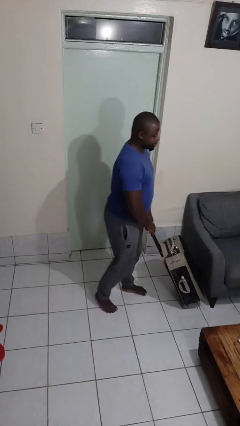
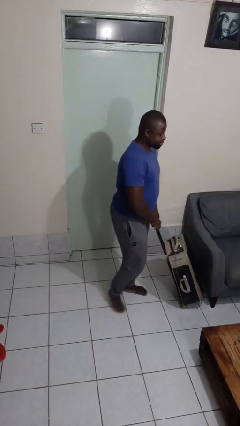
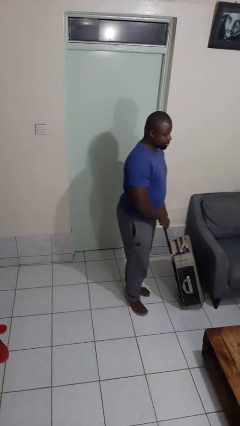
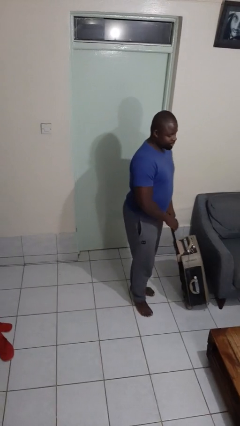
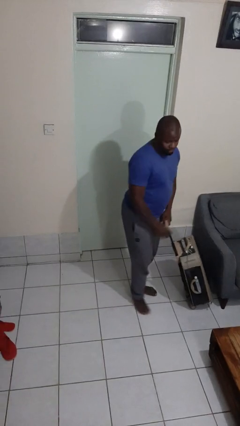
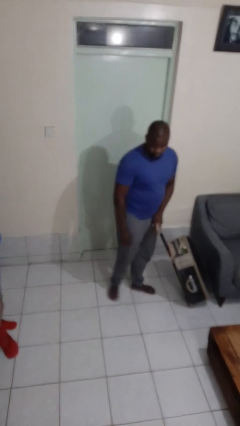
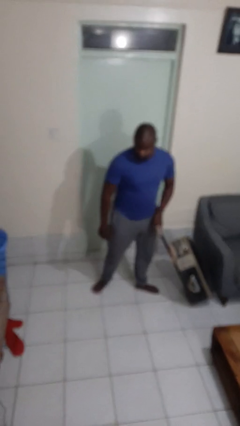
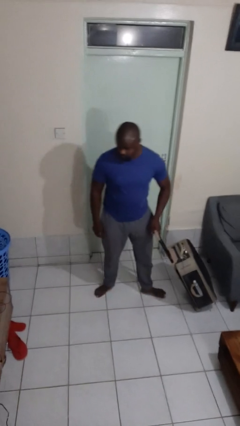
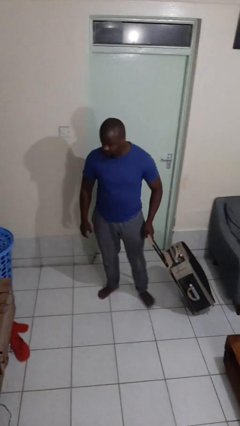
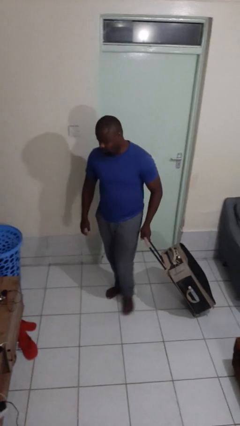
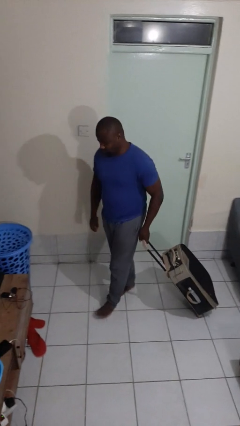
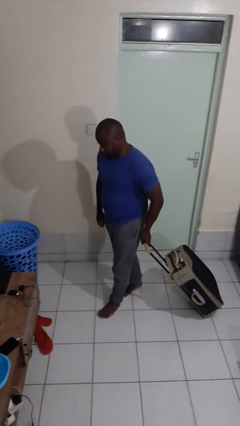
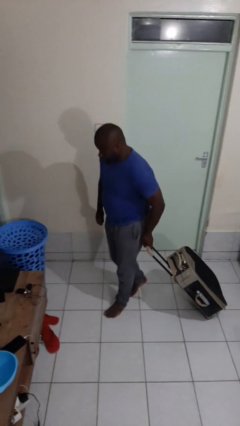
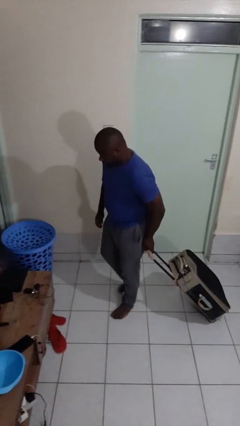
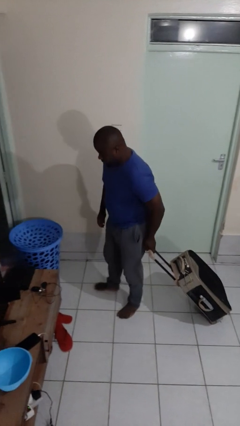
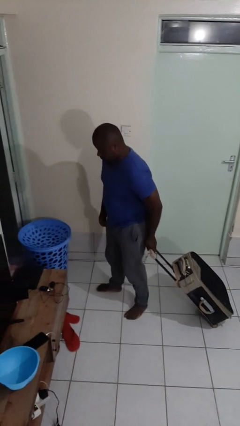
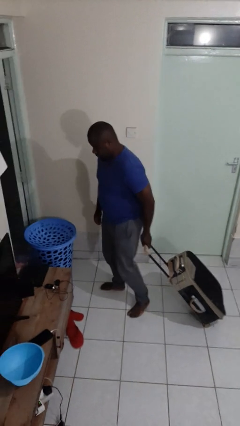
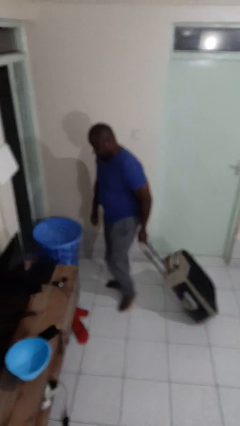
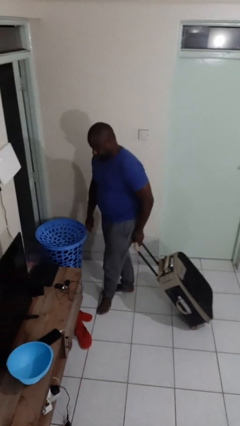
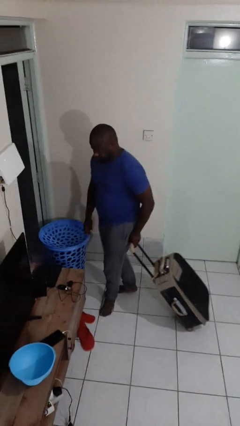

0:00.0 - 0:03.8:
person pulls wheeled cart

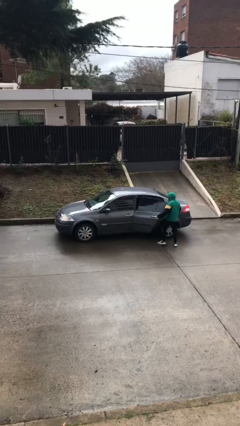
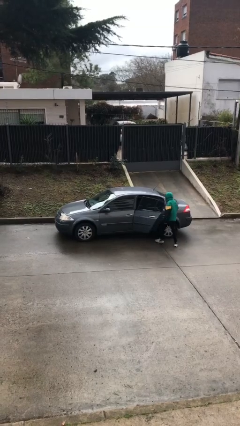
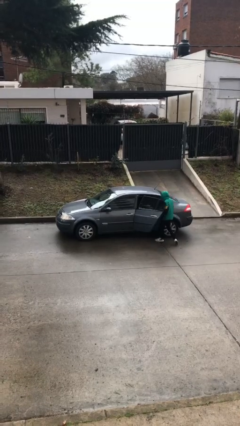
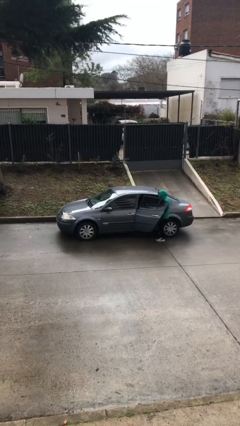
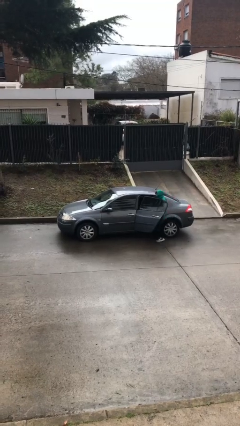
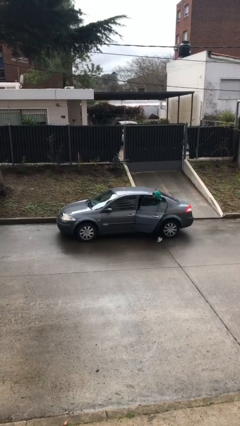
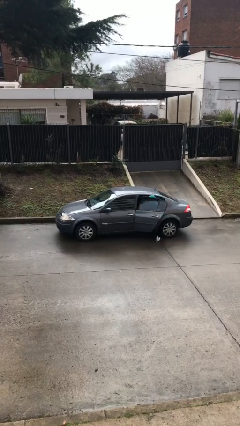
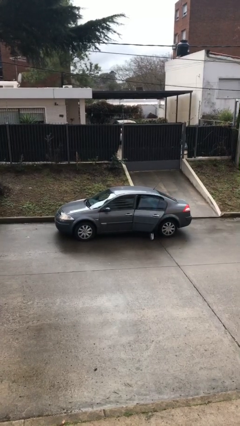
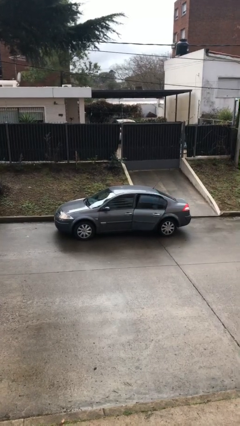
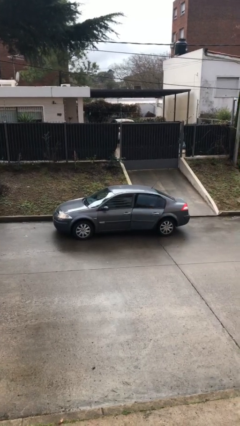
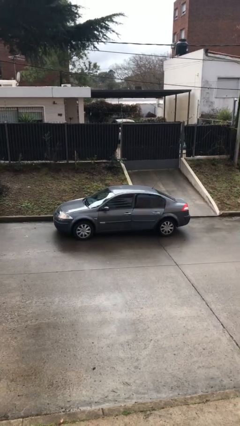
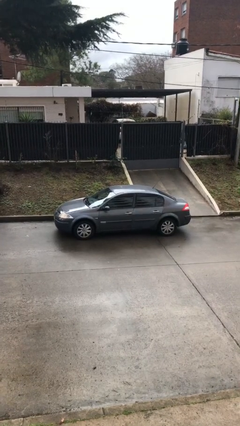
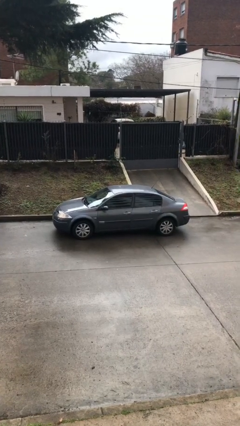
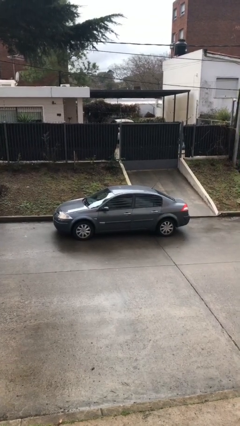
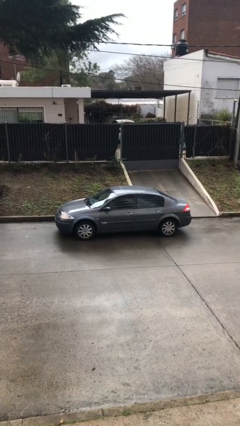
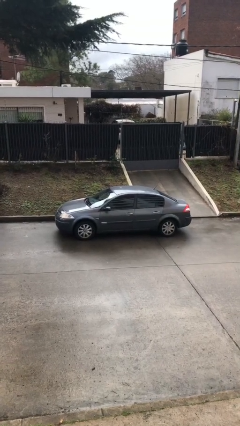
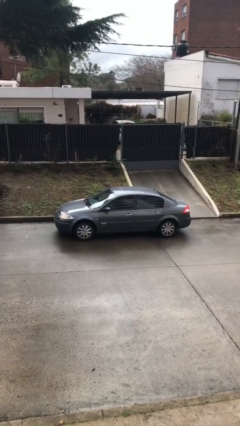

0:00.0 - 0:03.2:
car picks up person

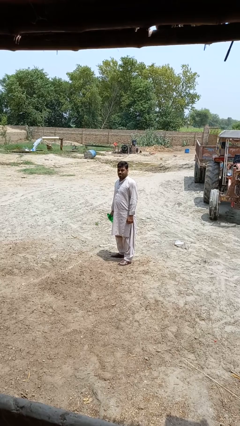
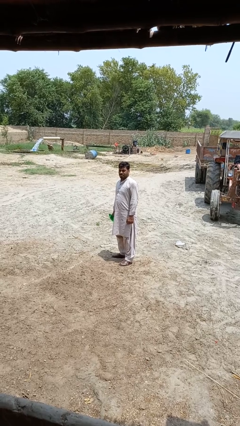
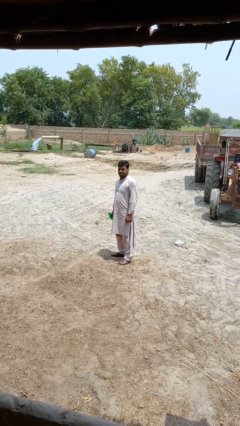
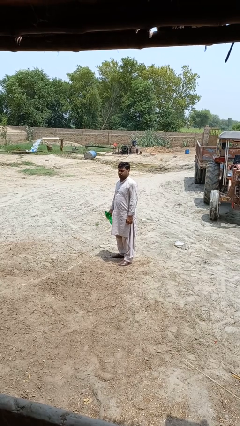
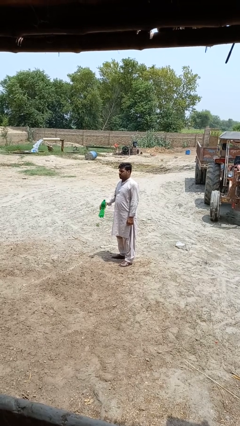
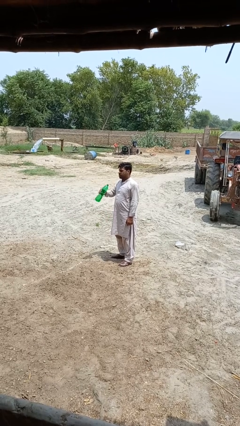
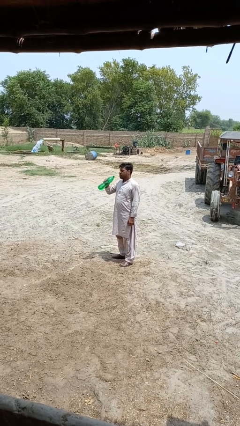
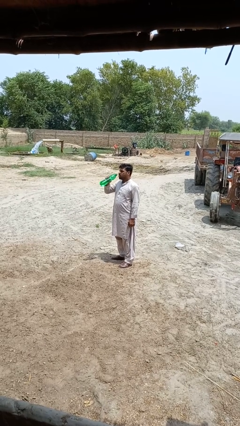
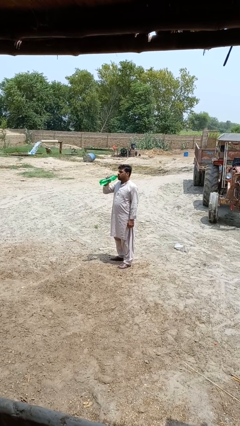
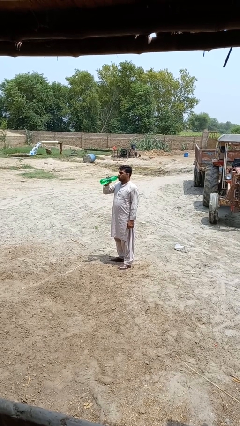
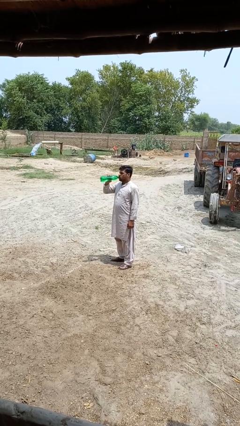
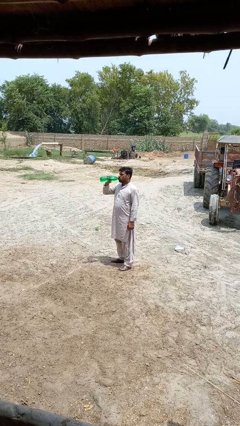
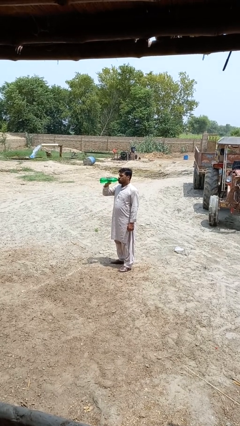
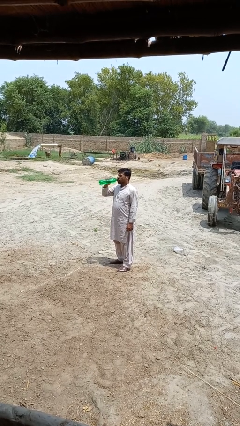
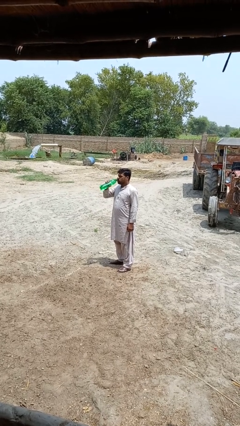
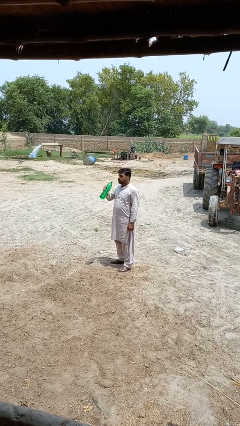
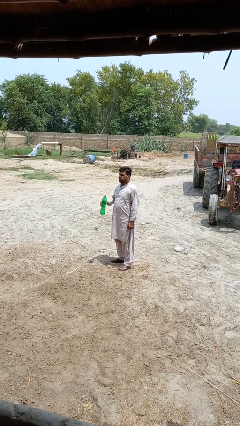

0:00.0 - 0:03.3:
person drinks from bottle

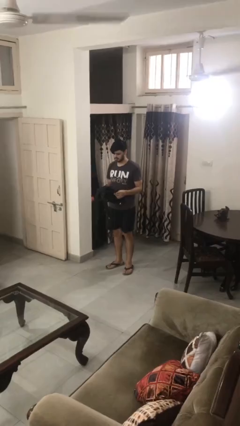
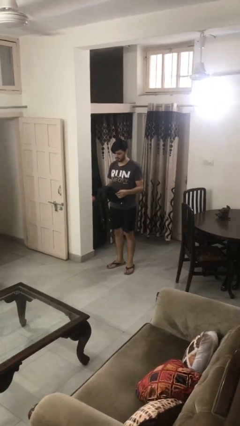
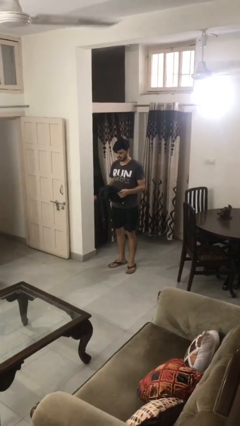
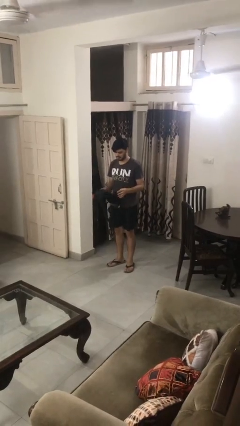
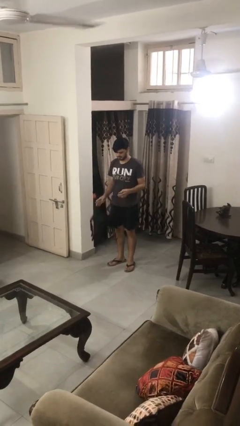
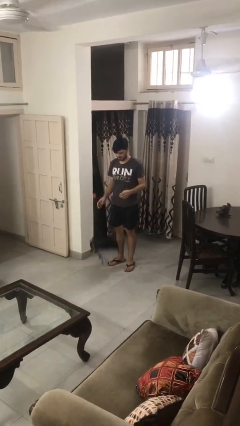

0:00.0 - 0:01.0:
person drops object

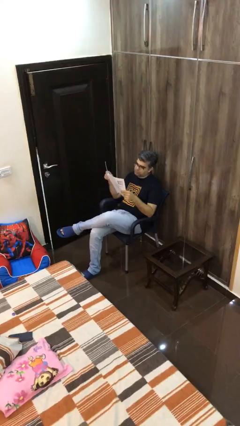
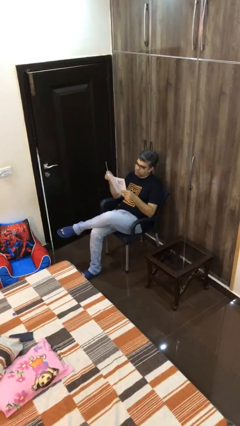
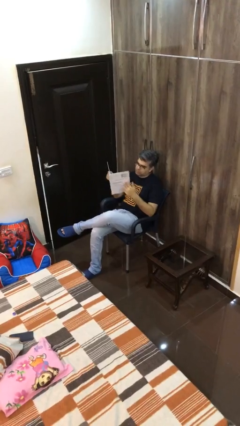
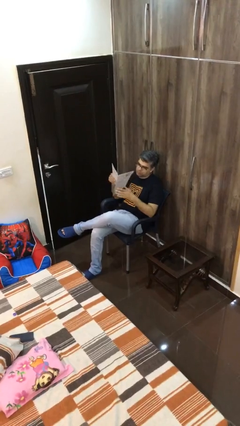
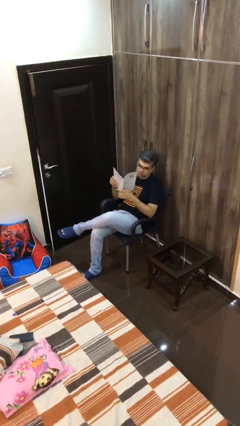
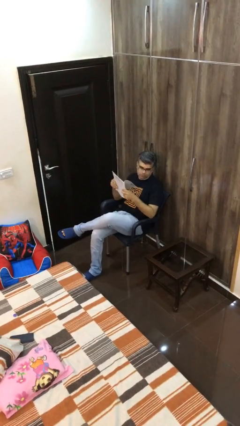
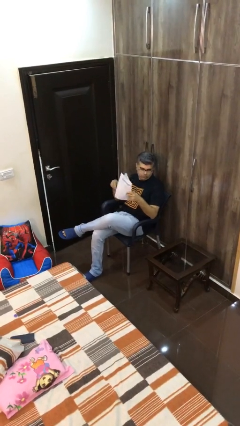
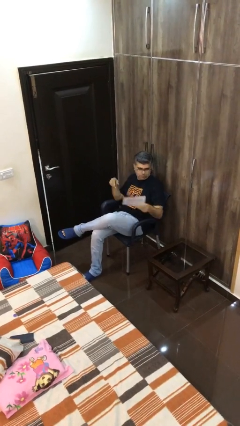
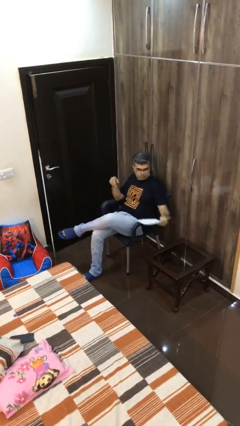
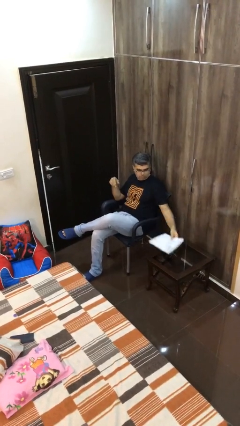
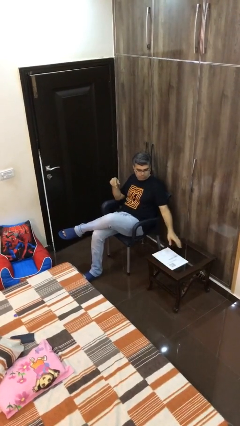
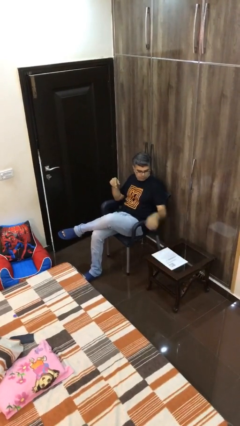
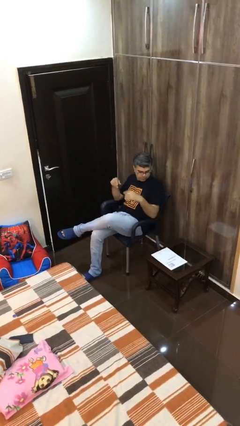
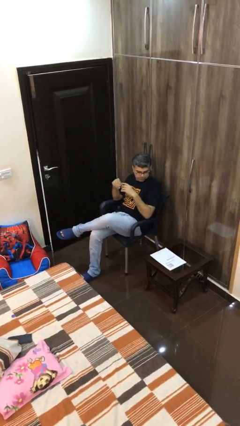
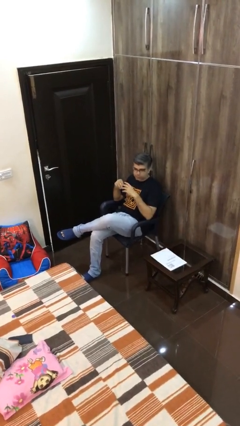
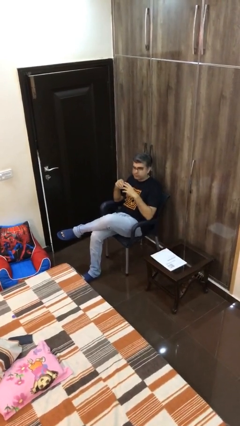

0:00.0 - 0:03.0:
person puts down object on table

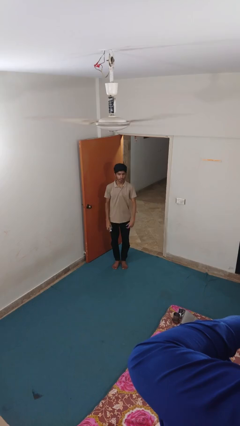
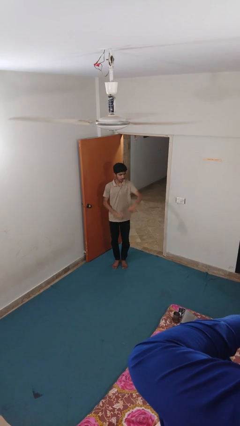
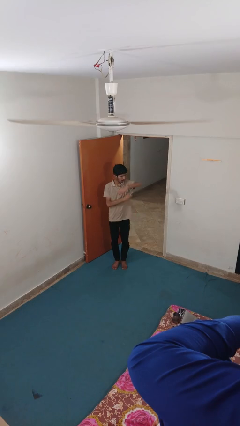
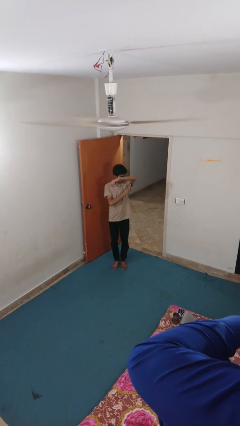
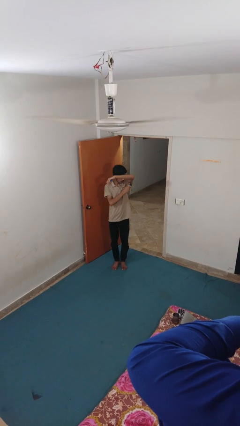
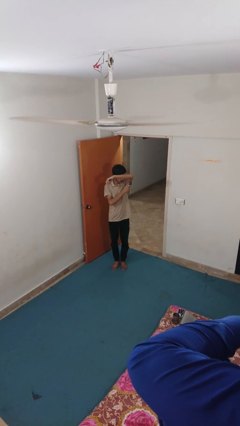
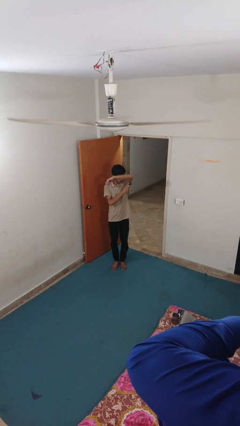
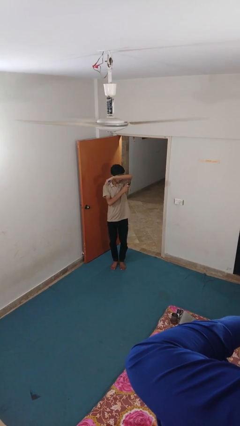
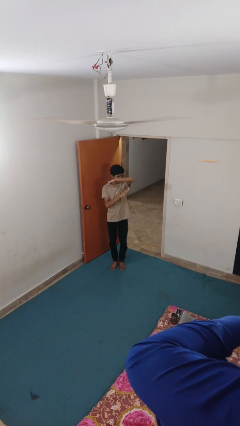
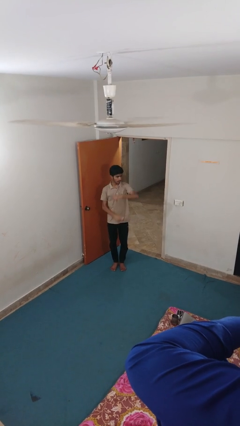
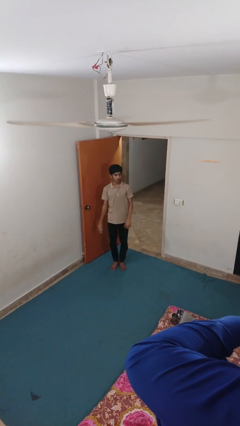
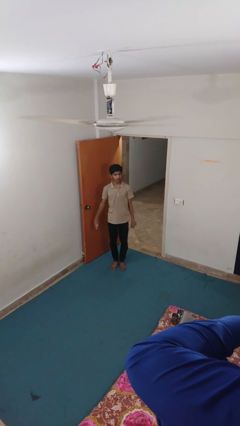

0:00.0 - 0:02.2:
person applies deodorant

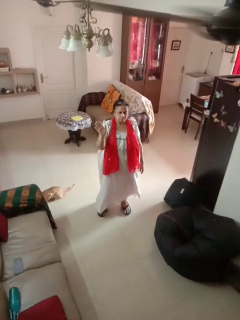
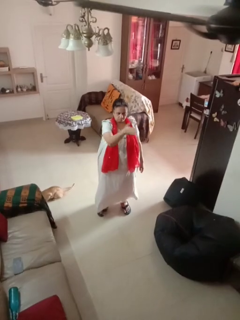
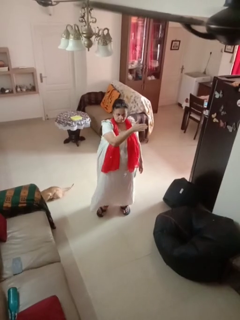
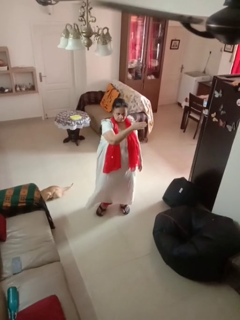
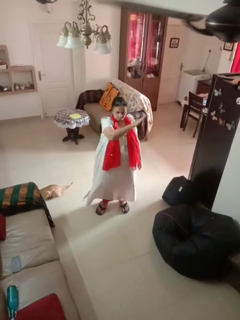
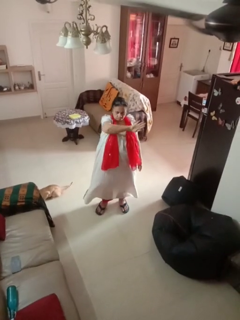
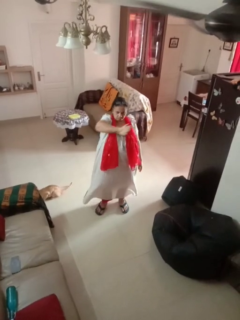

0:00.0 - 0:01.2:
person gestures swipe left
